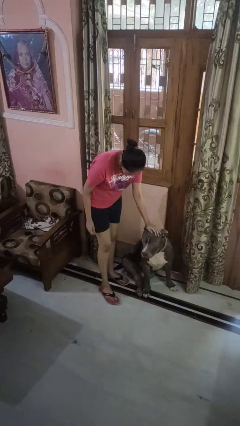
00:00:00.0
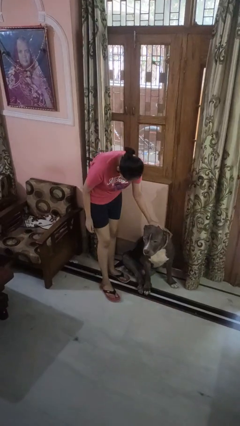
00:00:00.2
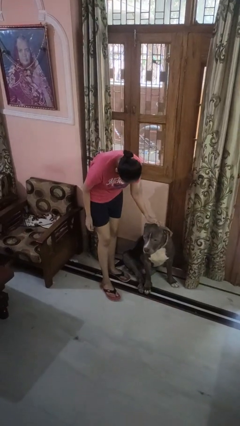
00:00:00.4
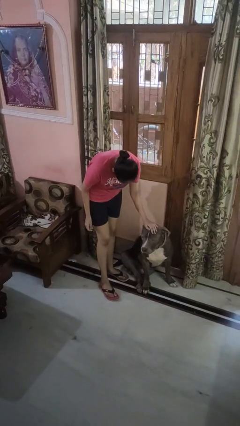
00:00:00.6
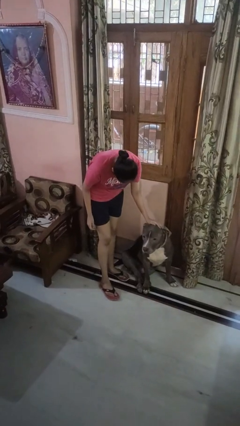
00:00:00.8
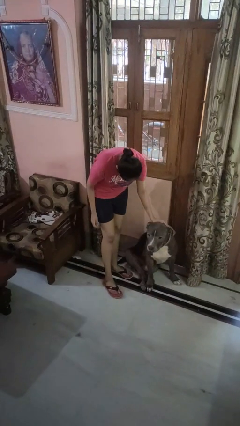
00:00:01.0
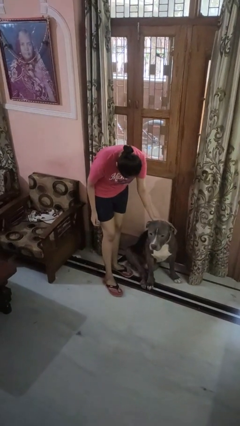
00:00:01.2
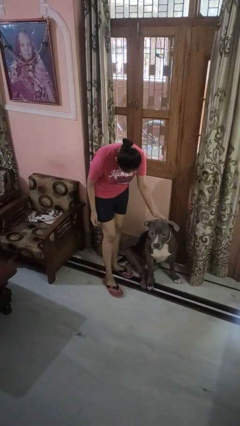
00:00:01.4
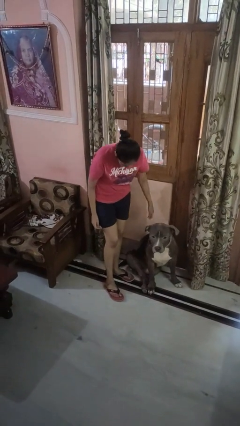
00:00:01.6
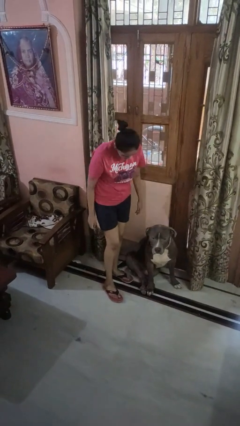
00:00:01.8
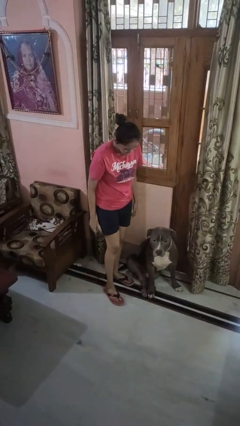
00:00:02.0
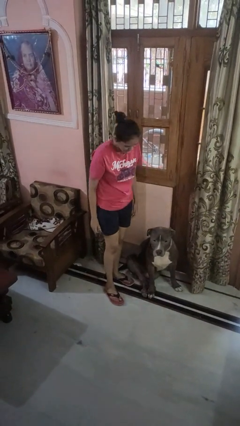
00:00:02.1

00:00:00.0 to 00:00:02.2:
person pets dog

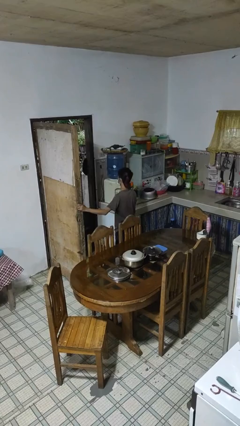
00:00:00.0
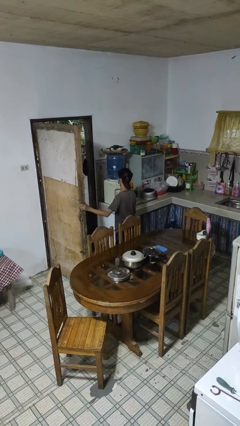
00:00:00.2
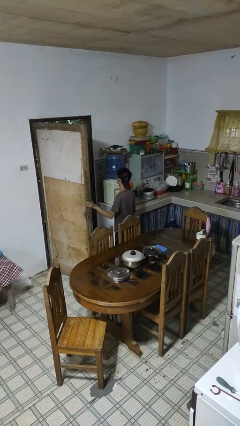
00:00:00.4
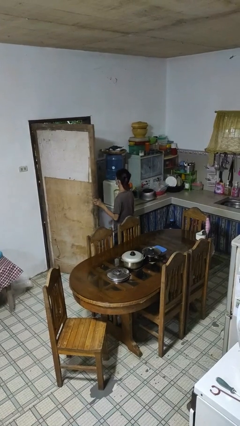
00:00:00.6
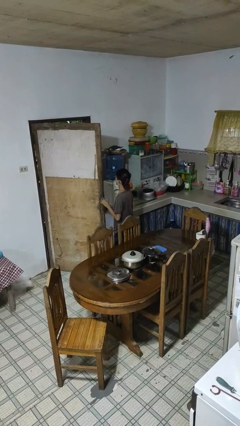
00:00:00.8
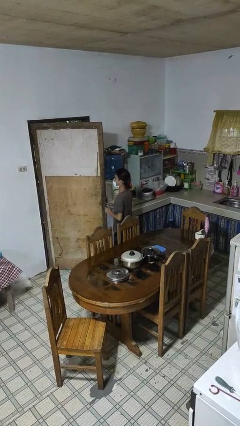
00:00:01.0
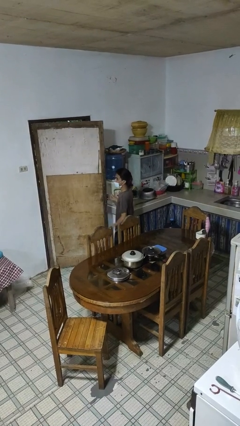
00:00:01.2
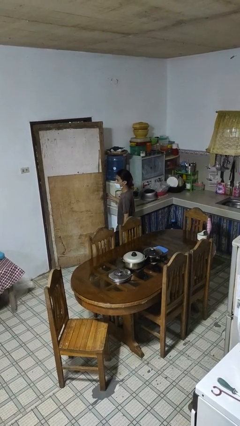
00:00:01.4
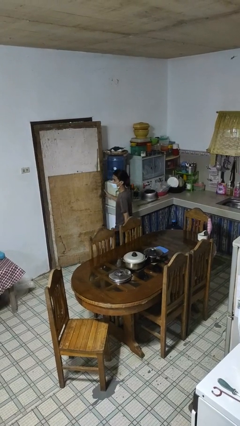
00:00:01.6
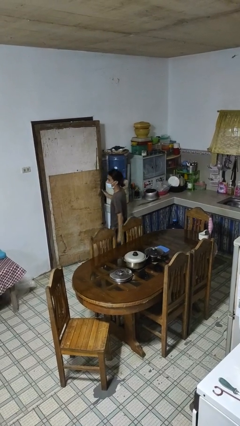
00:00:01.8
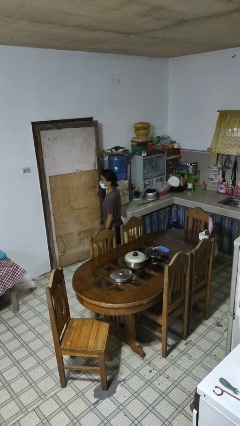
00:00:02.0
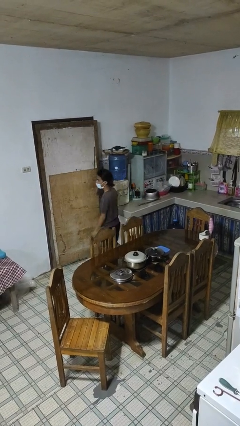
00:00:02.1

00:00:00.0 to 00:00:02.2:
person closes facility door

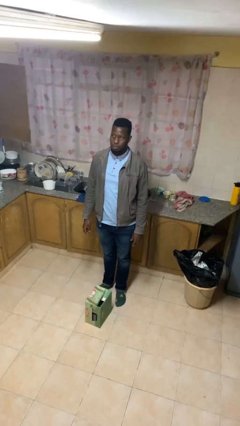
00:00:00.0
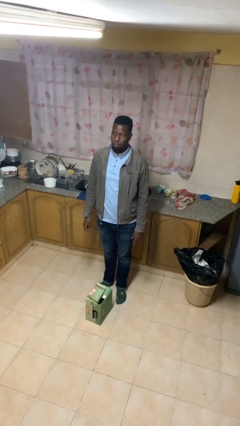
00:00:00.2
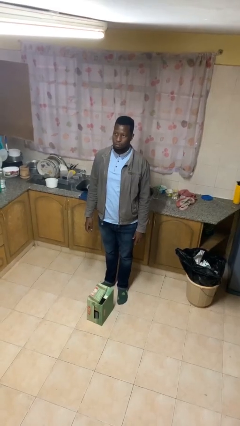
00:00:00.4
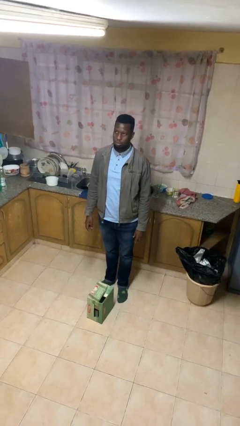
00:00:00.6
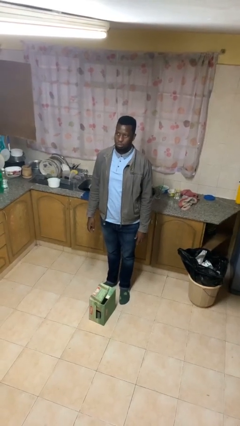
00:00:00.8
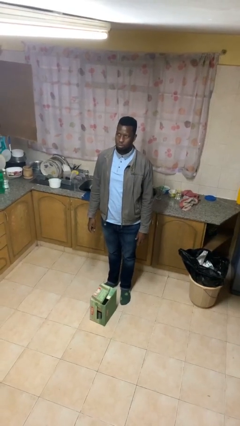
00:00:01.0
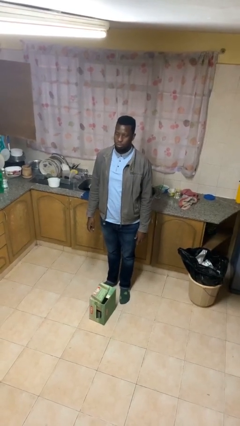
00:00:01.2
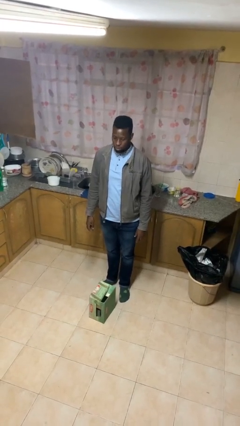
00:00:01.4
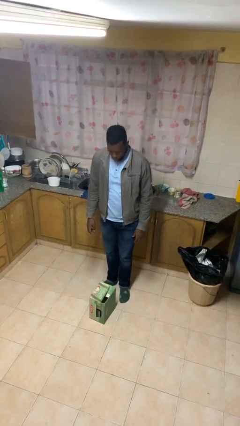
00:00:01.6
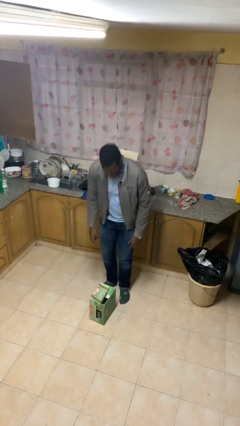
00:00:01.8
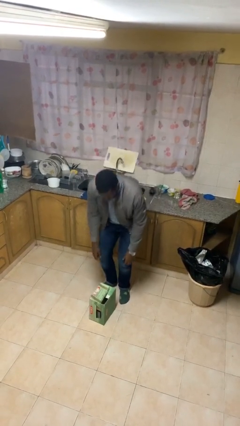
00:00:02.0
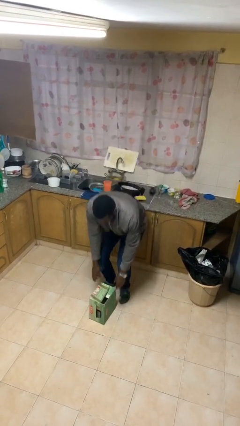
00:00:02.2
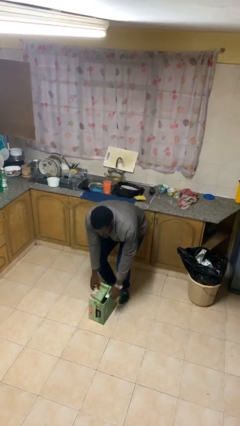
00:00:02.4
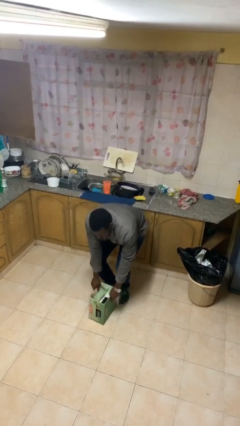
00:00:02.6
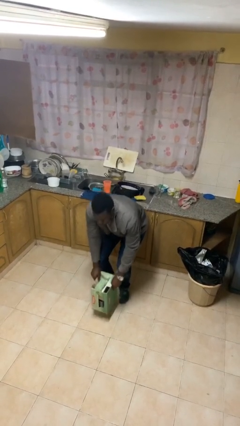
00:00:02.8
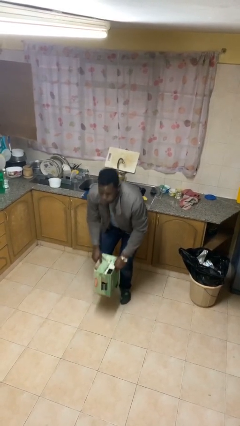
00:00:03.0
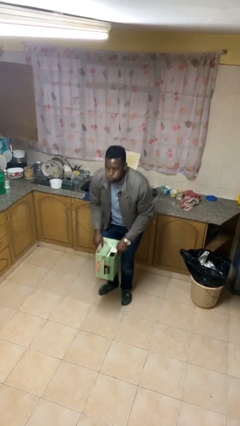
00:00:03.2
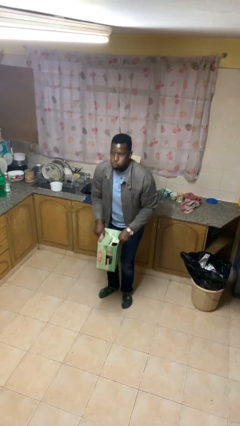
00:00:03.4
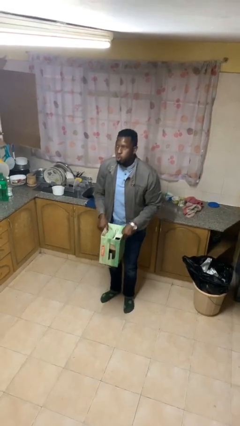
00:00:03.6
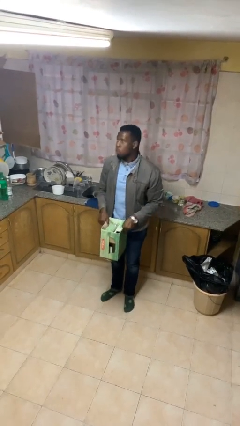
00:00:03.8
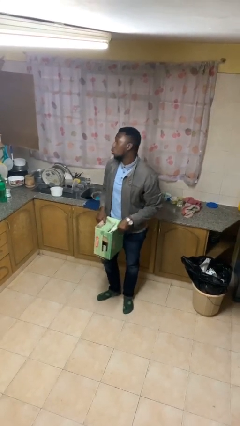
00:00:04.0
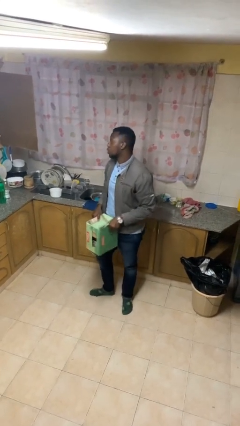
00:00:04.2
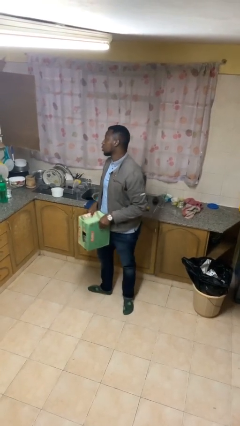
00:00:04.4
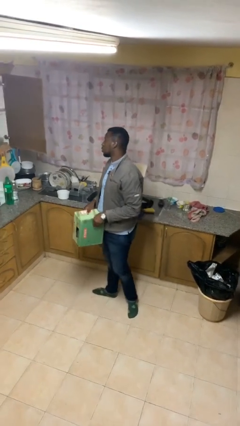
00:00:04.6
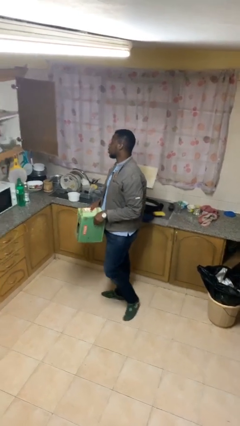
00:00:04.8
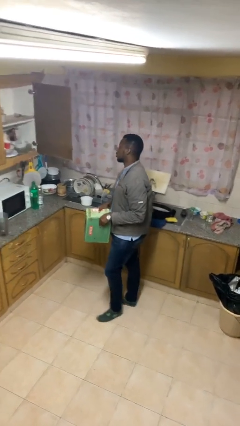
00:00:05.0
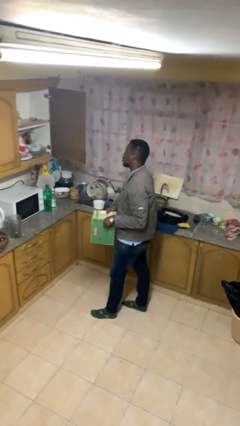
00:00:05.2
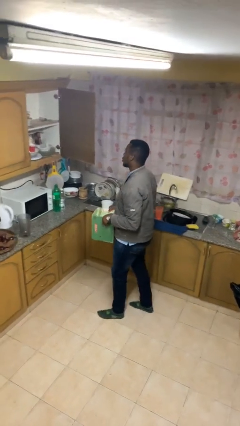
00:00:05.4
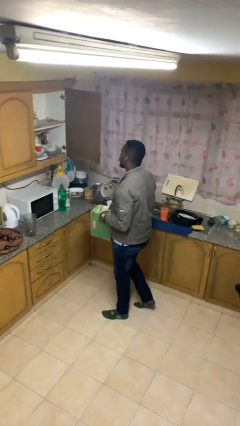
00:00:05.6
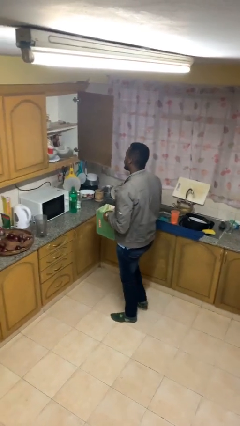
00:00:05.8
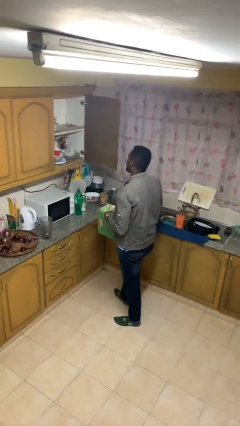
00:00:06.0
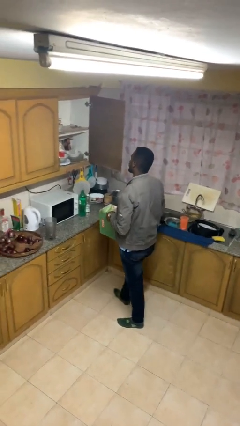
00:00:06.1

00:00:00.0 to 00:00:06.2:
person picks up object from floor

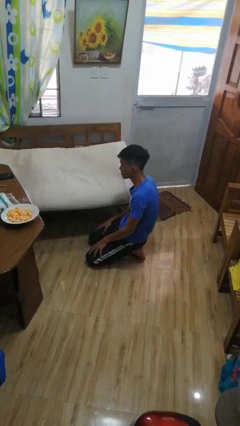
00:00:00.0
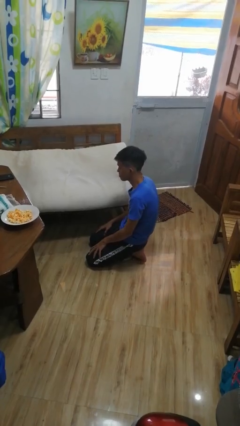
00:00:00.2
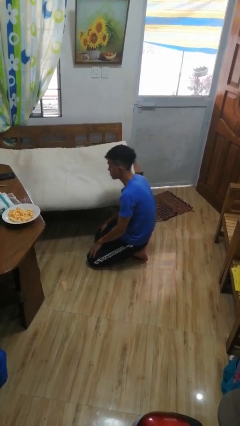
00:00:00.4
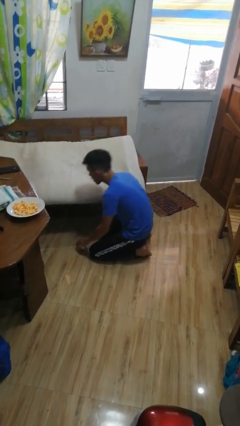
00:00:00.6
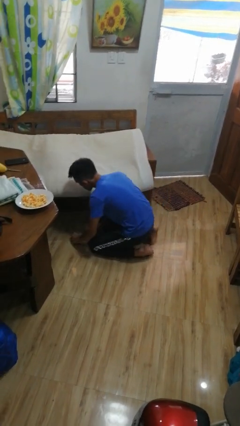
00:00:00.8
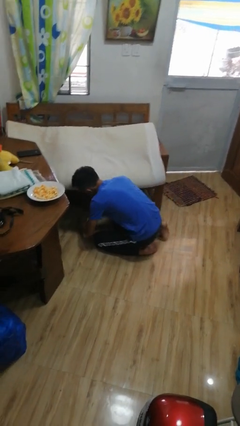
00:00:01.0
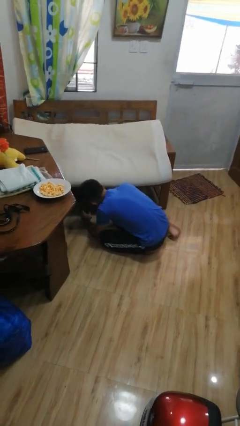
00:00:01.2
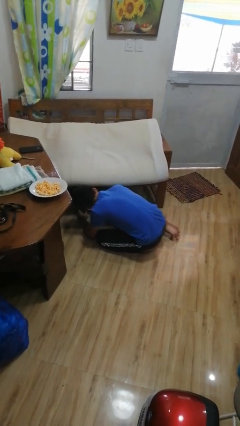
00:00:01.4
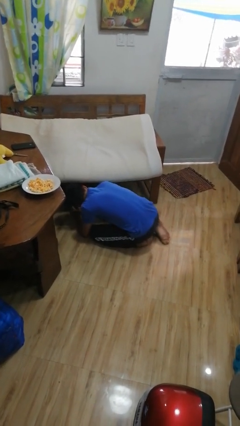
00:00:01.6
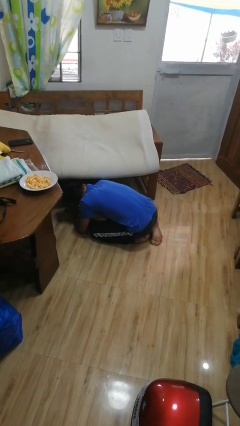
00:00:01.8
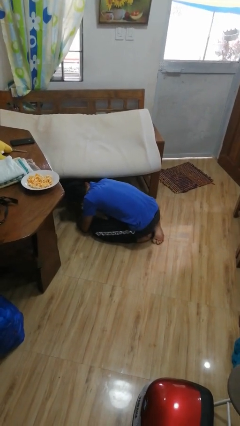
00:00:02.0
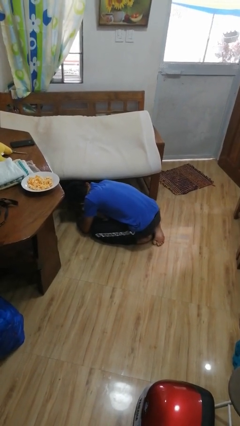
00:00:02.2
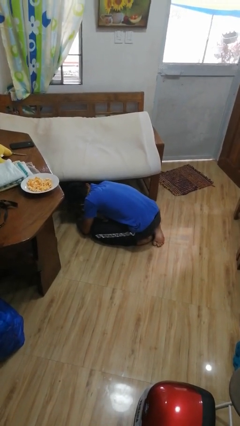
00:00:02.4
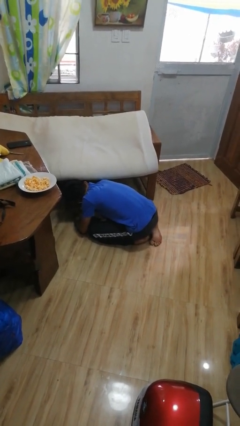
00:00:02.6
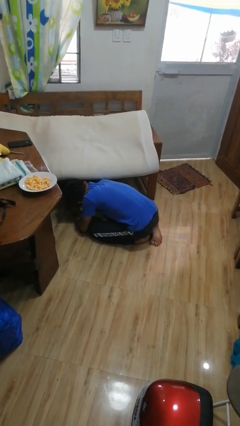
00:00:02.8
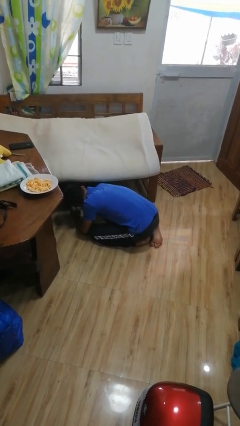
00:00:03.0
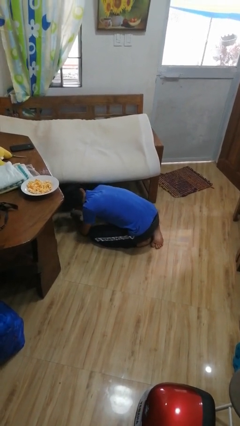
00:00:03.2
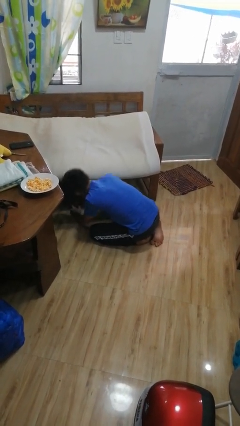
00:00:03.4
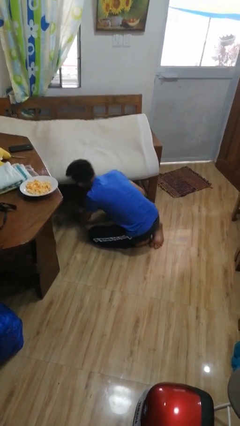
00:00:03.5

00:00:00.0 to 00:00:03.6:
person searches under couch

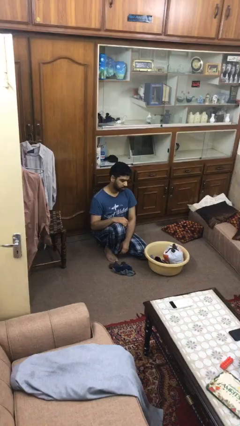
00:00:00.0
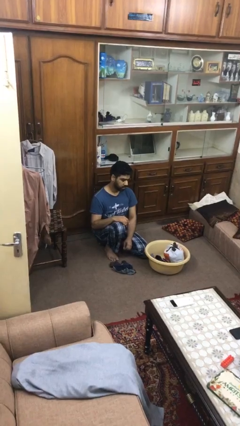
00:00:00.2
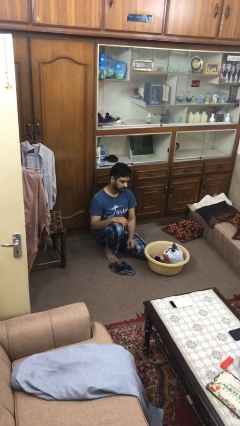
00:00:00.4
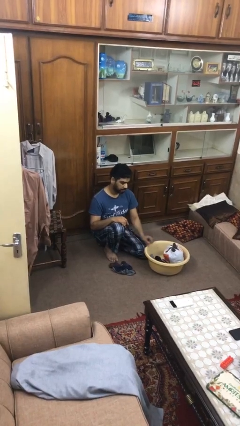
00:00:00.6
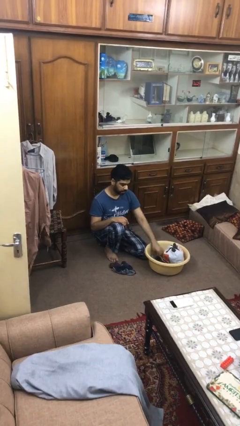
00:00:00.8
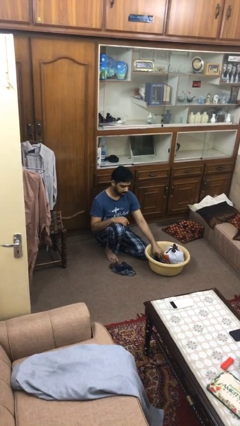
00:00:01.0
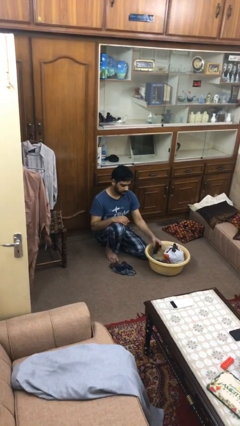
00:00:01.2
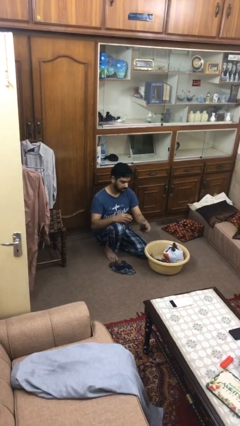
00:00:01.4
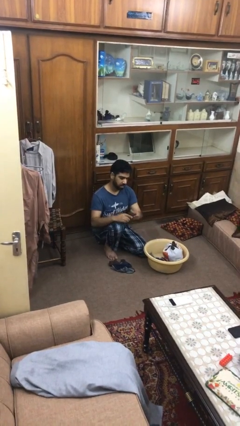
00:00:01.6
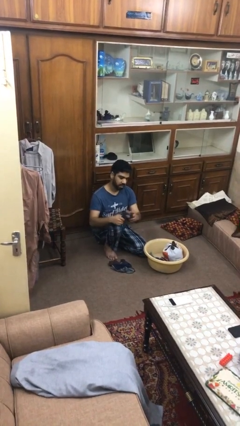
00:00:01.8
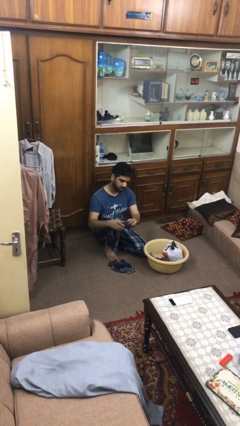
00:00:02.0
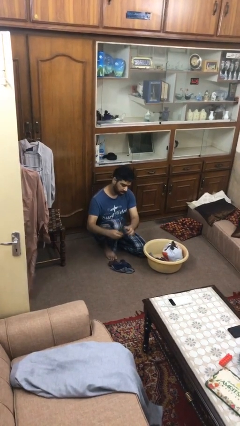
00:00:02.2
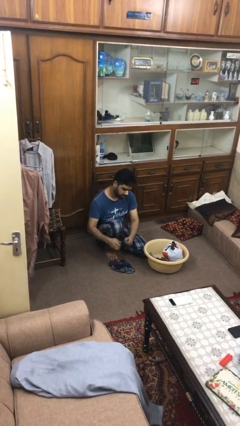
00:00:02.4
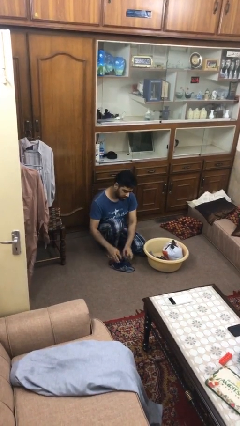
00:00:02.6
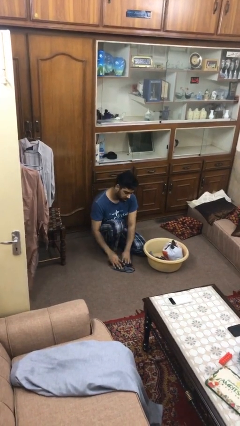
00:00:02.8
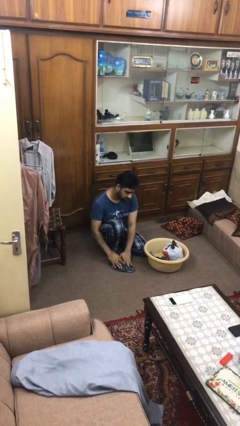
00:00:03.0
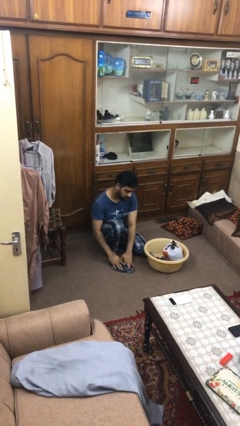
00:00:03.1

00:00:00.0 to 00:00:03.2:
person folds socks

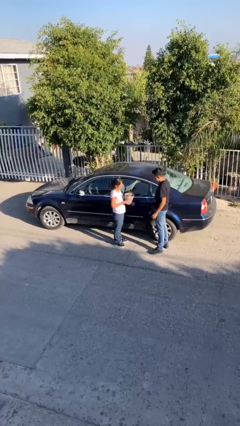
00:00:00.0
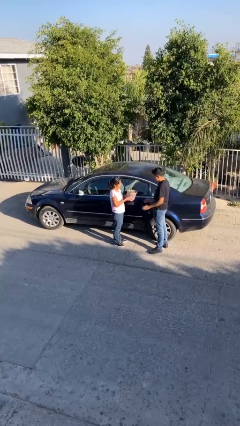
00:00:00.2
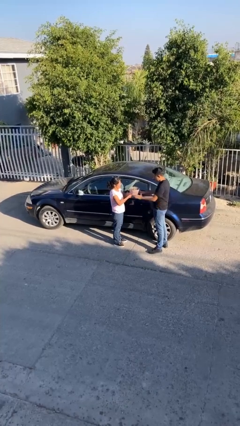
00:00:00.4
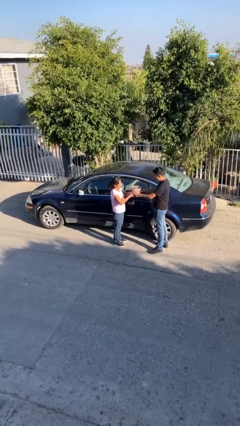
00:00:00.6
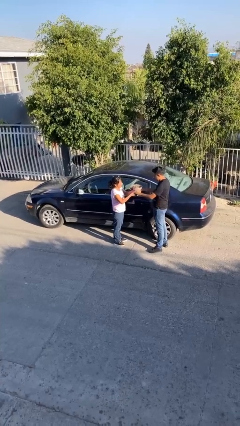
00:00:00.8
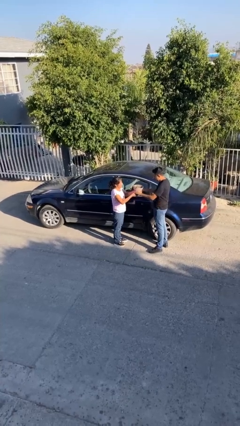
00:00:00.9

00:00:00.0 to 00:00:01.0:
person transfers object to person
